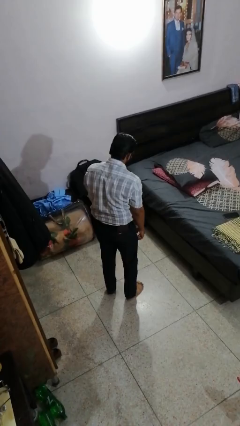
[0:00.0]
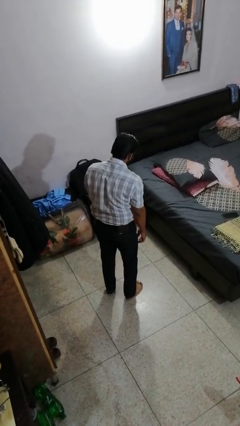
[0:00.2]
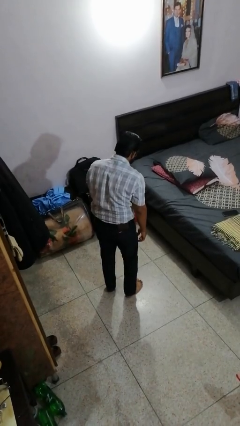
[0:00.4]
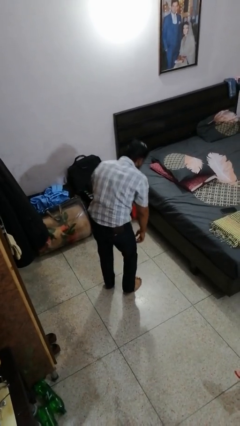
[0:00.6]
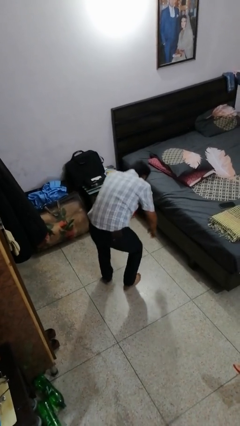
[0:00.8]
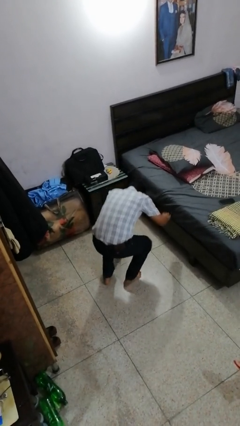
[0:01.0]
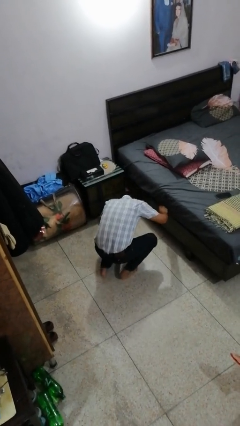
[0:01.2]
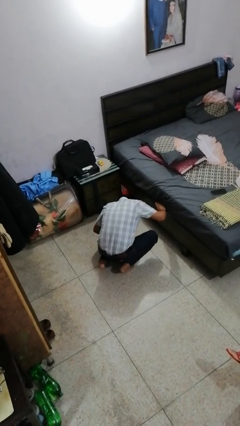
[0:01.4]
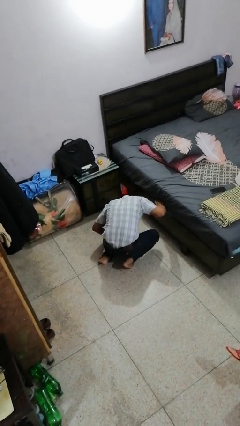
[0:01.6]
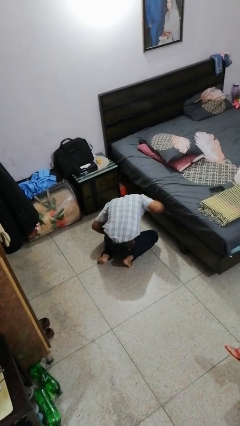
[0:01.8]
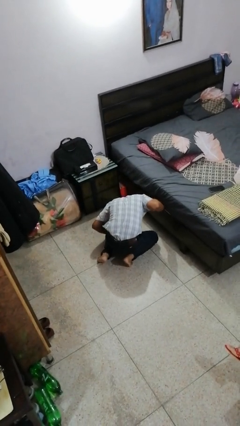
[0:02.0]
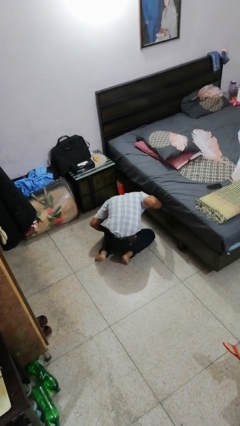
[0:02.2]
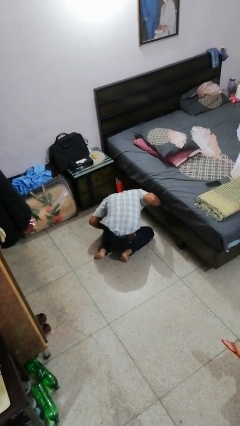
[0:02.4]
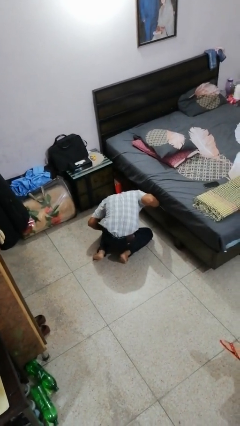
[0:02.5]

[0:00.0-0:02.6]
person searches under bed

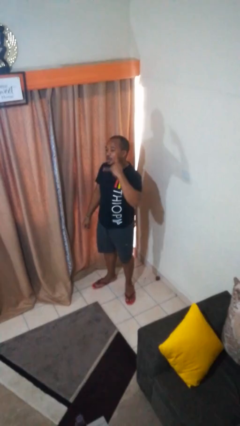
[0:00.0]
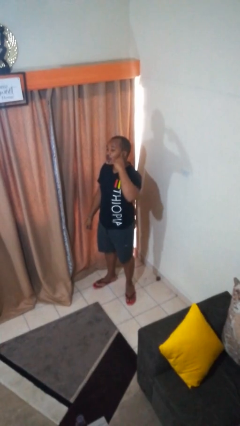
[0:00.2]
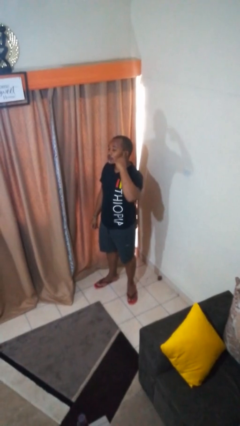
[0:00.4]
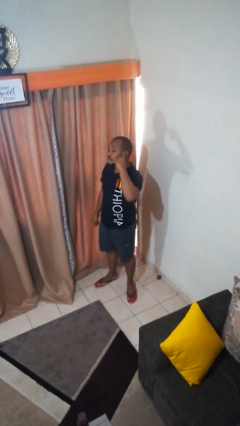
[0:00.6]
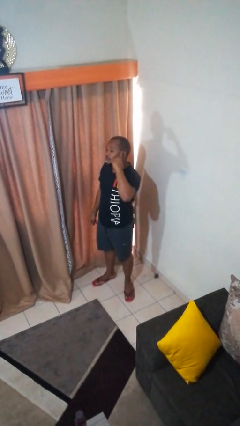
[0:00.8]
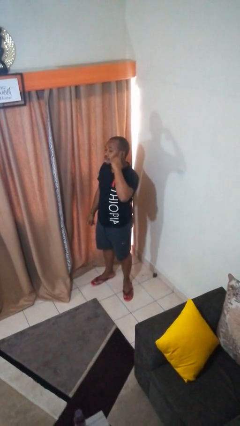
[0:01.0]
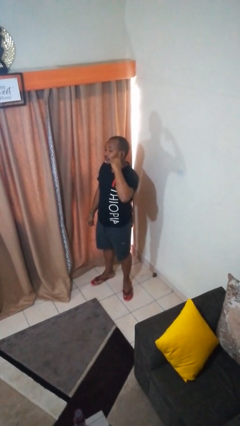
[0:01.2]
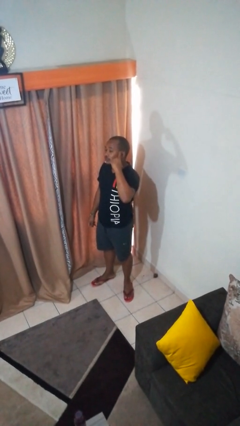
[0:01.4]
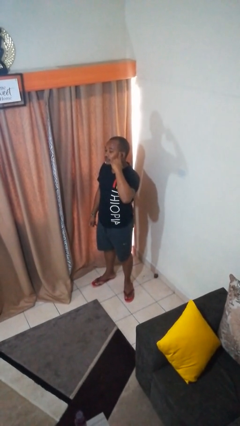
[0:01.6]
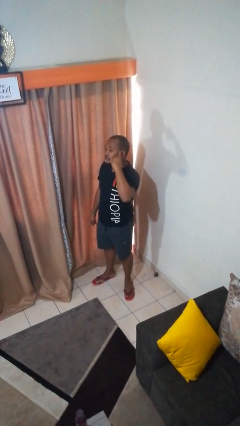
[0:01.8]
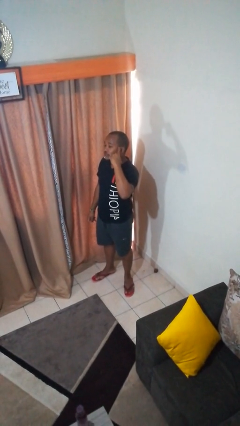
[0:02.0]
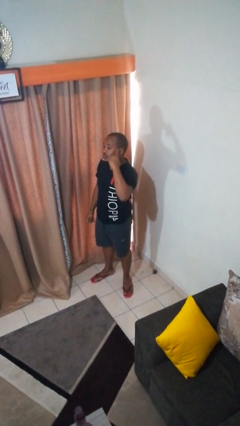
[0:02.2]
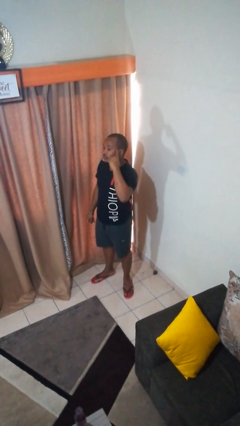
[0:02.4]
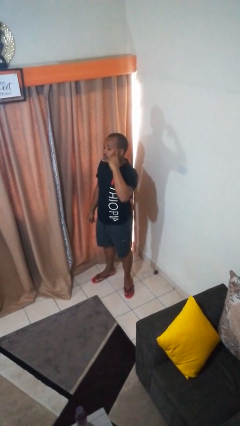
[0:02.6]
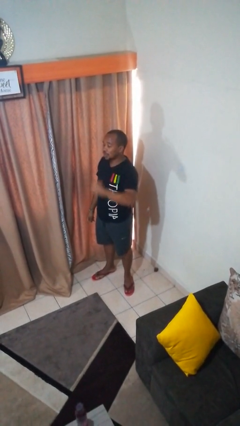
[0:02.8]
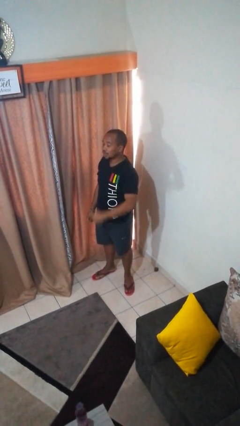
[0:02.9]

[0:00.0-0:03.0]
person gestures call me

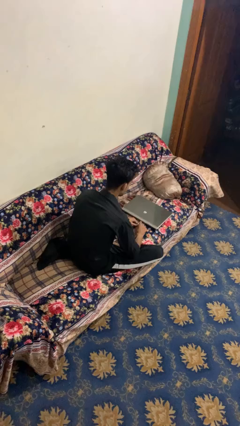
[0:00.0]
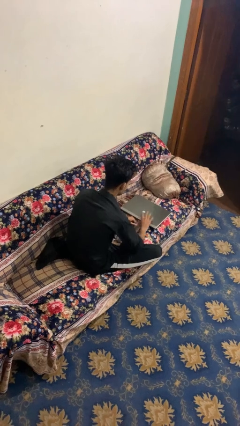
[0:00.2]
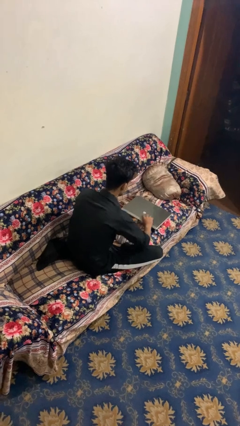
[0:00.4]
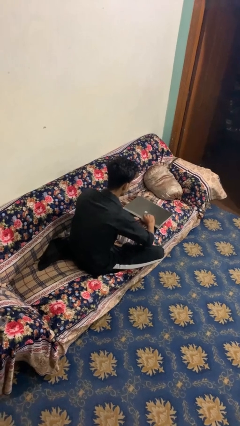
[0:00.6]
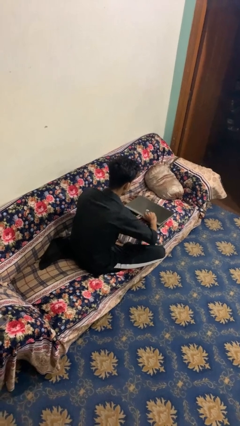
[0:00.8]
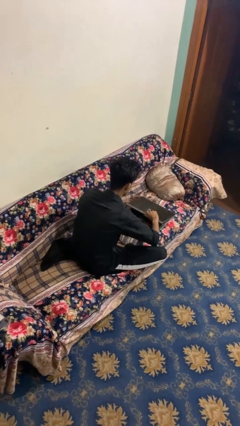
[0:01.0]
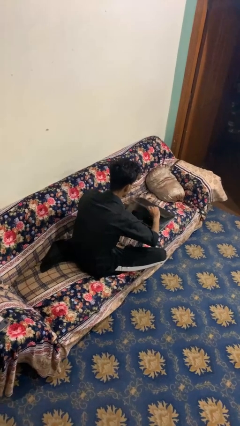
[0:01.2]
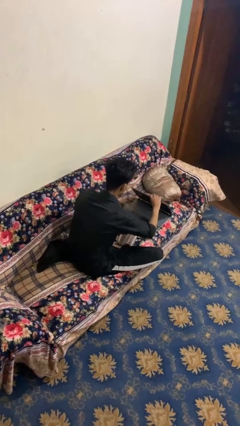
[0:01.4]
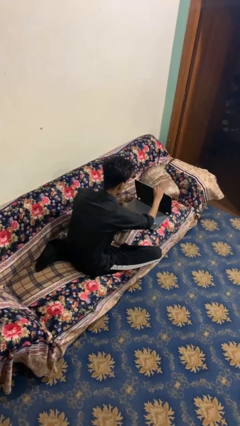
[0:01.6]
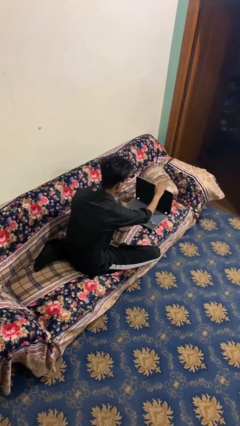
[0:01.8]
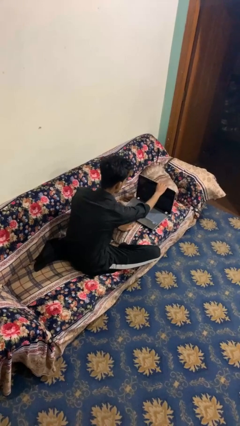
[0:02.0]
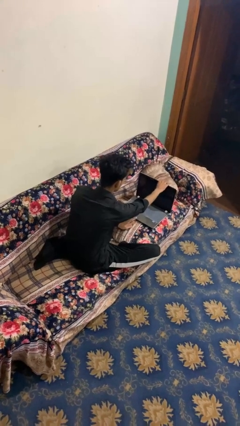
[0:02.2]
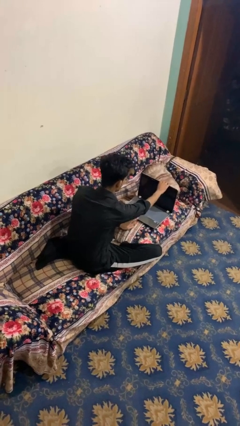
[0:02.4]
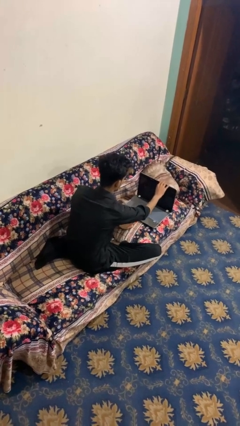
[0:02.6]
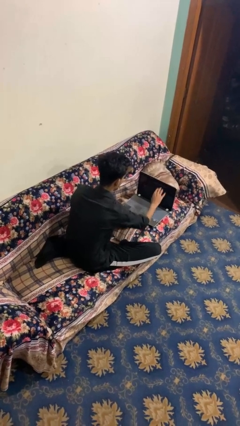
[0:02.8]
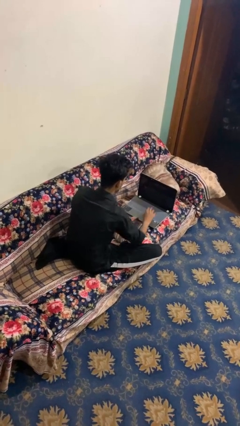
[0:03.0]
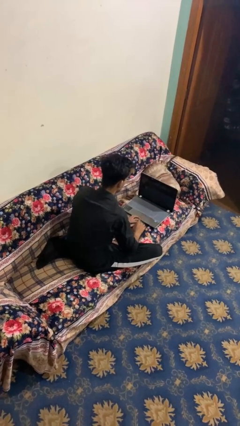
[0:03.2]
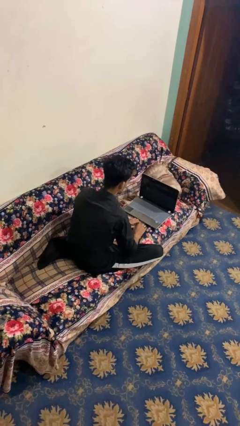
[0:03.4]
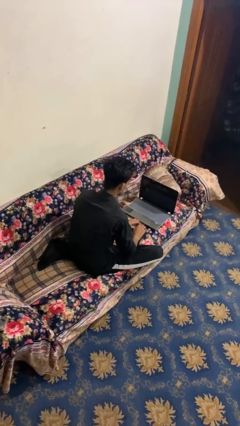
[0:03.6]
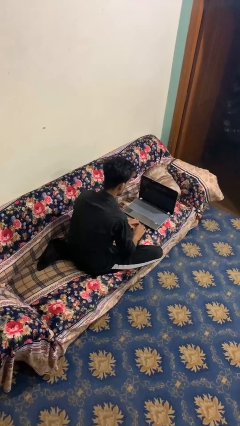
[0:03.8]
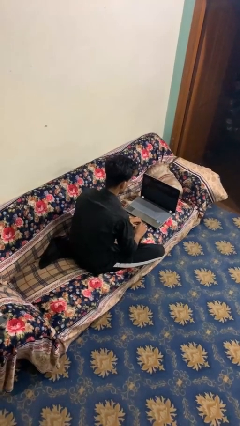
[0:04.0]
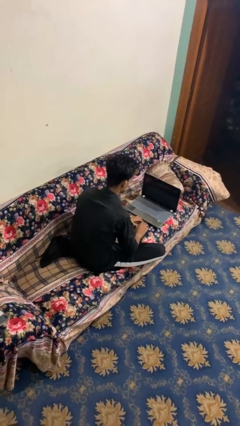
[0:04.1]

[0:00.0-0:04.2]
person opens laptop

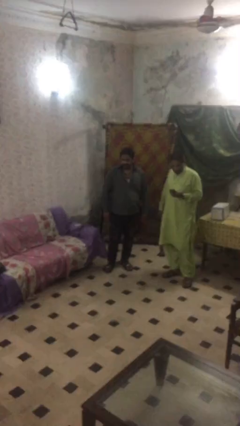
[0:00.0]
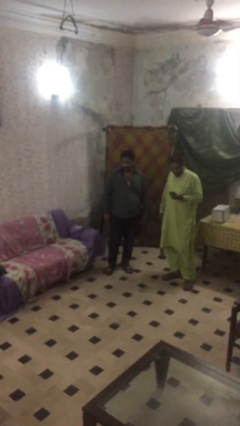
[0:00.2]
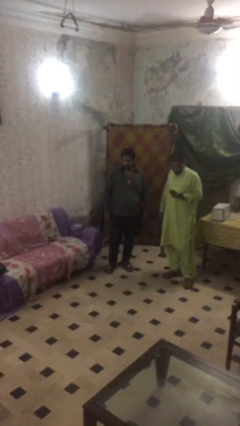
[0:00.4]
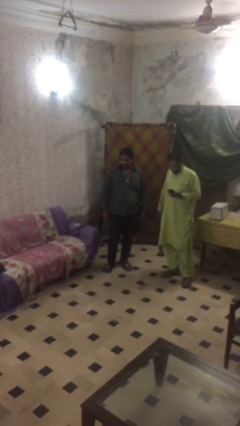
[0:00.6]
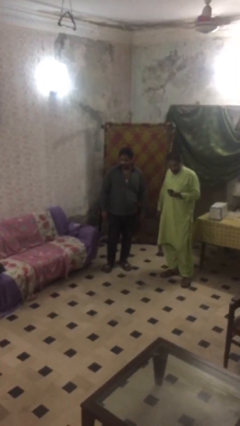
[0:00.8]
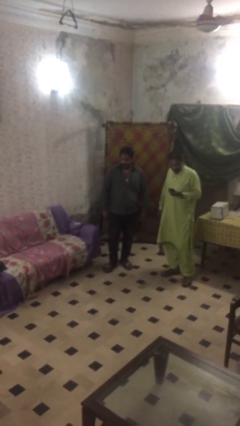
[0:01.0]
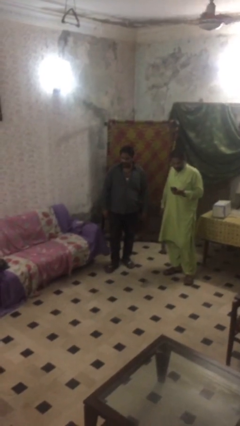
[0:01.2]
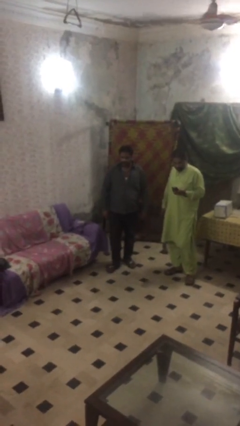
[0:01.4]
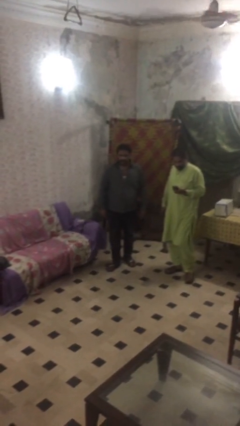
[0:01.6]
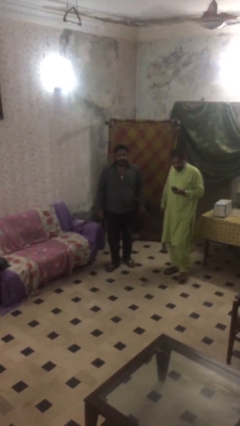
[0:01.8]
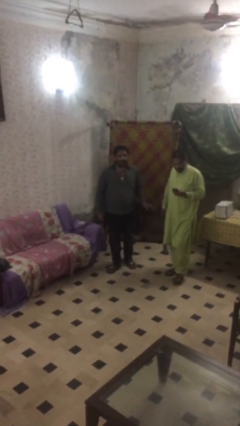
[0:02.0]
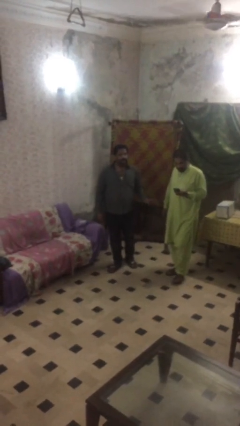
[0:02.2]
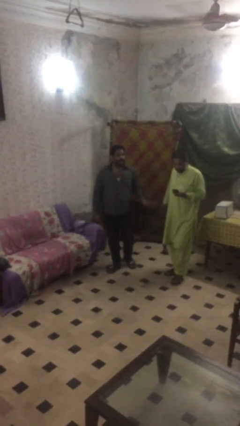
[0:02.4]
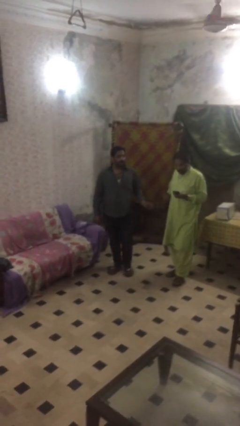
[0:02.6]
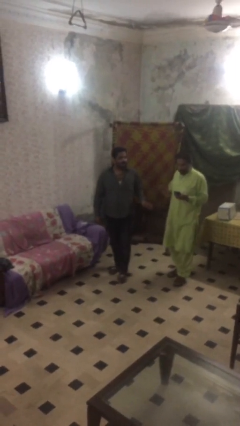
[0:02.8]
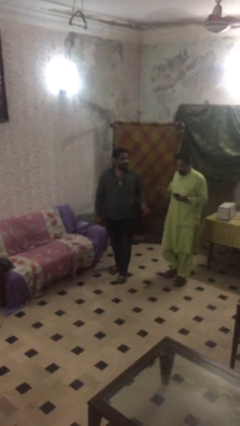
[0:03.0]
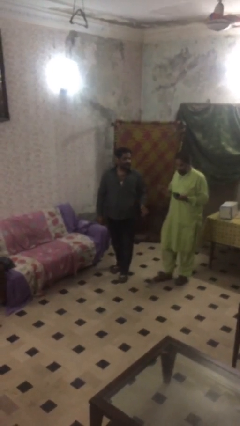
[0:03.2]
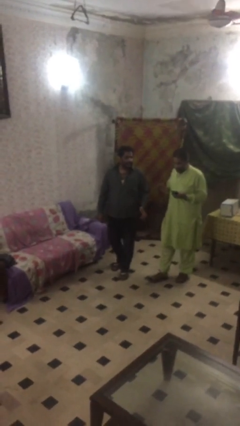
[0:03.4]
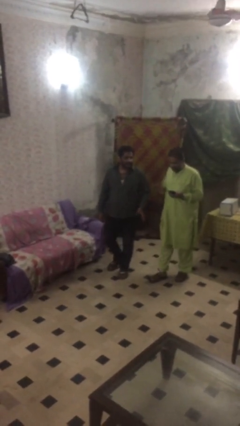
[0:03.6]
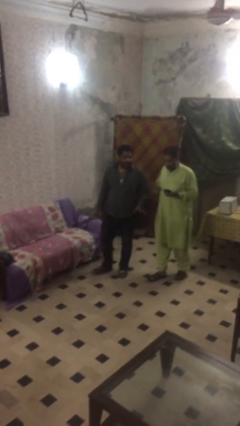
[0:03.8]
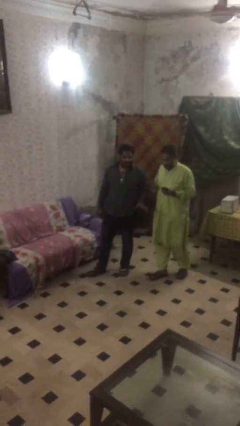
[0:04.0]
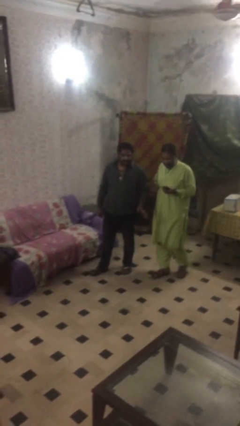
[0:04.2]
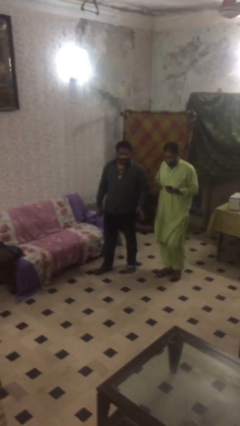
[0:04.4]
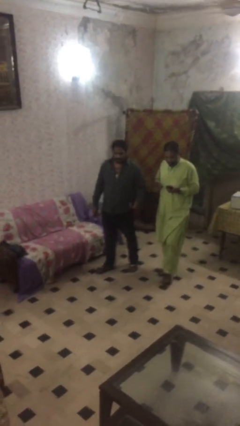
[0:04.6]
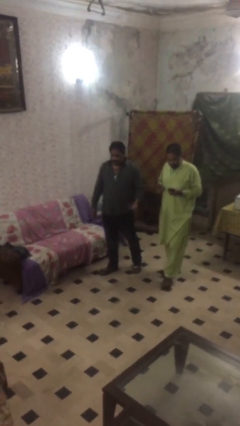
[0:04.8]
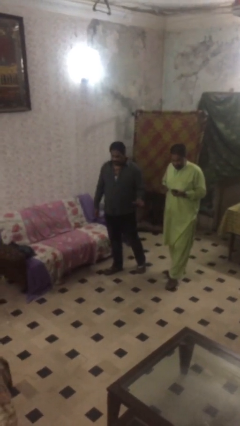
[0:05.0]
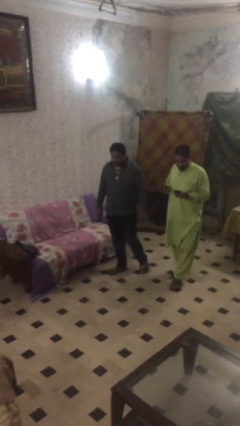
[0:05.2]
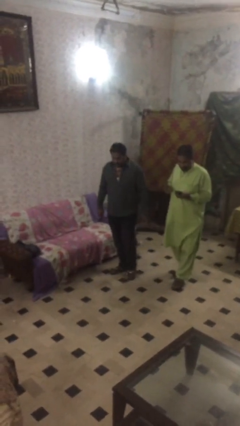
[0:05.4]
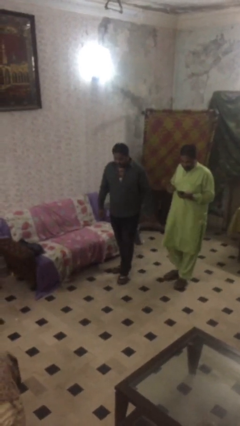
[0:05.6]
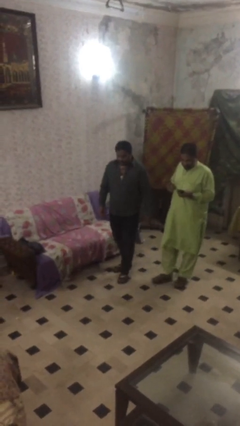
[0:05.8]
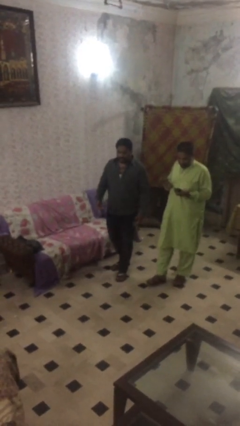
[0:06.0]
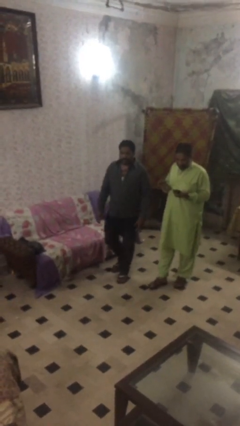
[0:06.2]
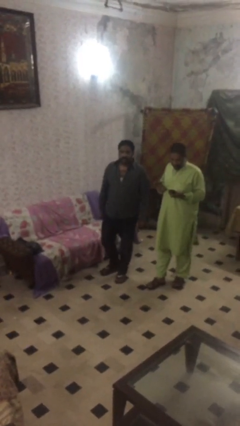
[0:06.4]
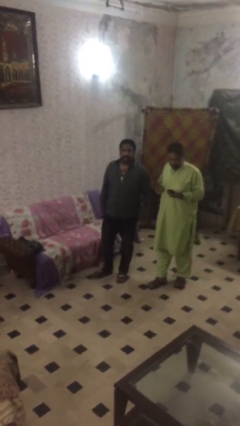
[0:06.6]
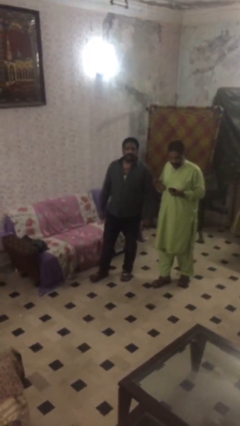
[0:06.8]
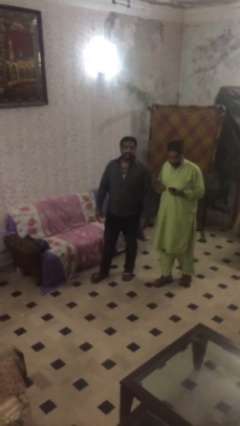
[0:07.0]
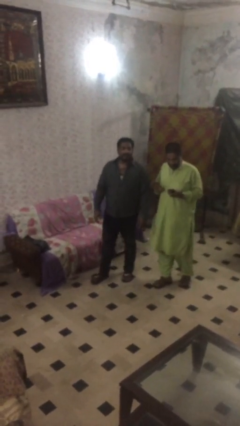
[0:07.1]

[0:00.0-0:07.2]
person talks to person

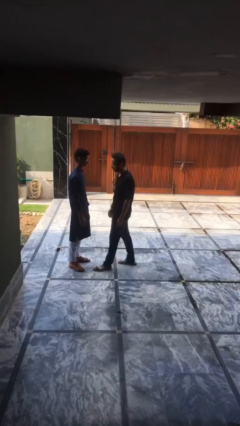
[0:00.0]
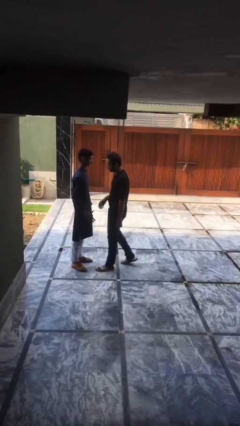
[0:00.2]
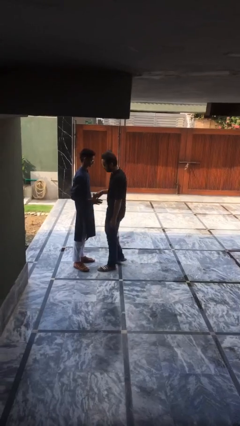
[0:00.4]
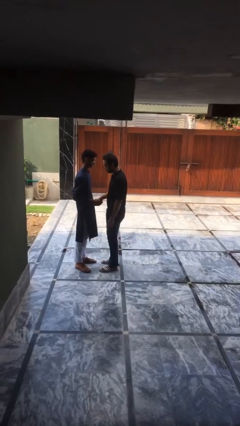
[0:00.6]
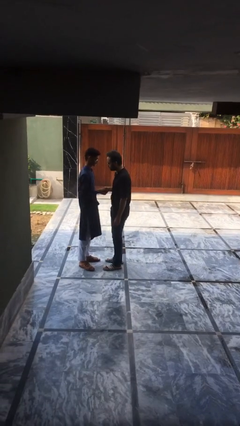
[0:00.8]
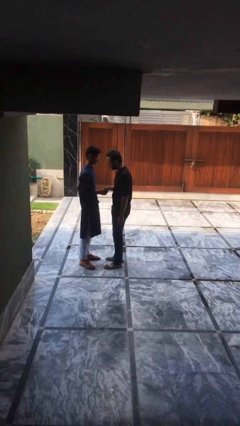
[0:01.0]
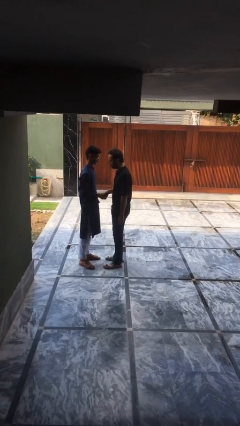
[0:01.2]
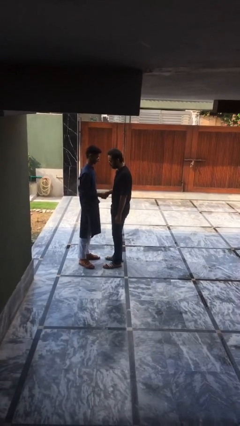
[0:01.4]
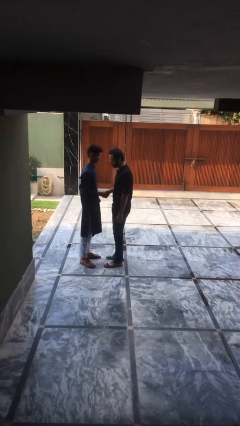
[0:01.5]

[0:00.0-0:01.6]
person shakes hand
